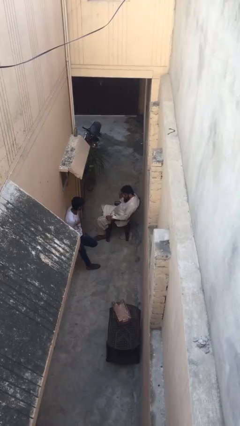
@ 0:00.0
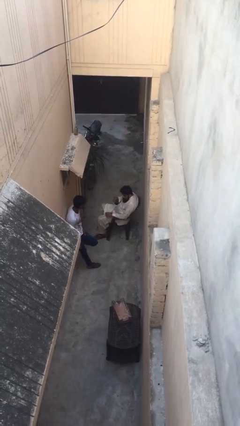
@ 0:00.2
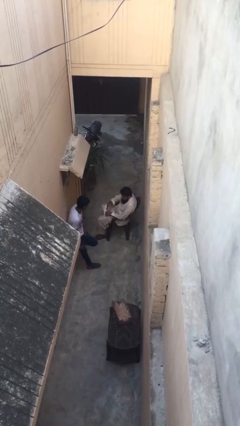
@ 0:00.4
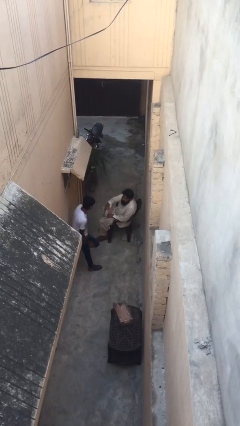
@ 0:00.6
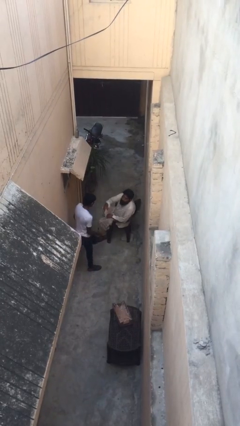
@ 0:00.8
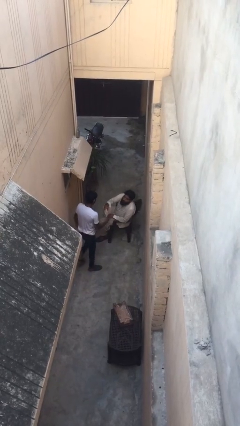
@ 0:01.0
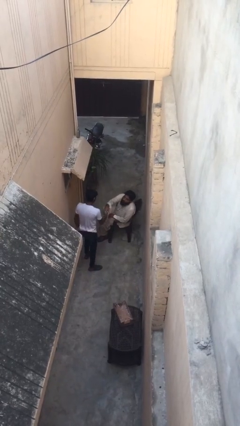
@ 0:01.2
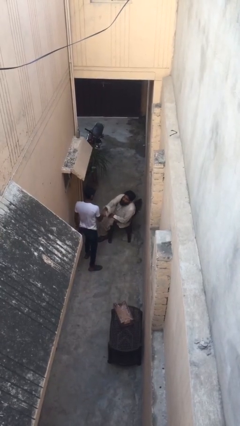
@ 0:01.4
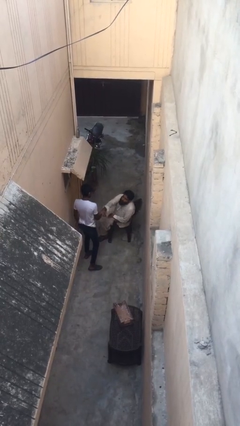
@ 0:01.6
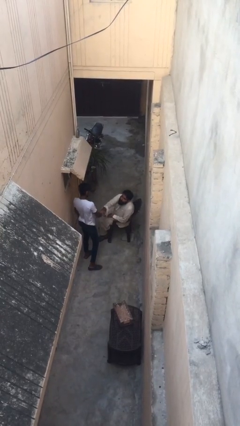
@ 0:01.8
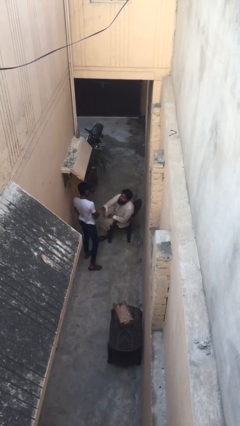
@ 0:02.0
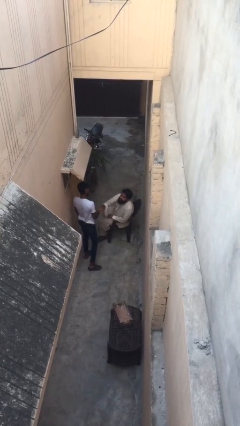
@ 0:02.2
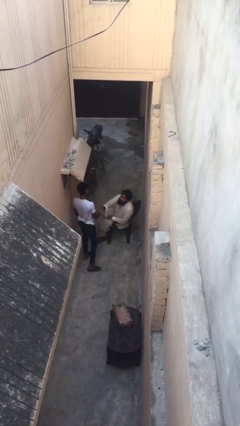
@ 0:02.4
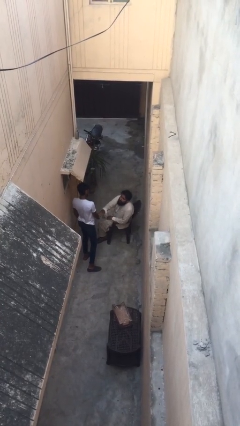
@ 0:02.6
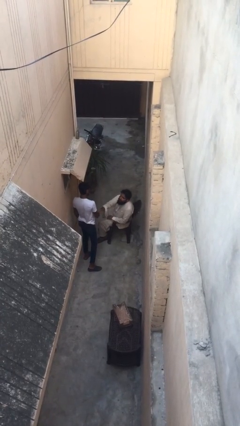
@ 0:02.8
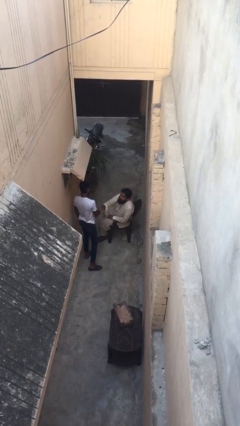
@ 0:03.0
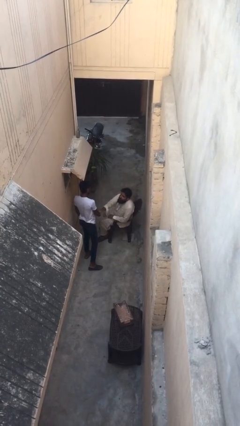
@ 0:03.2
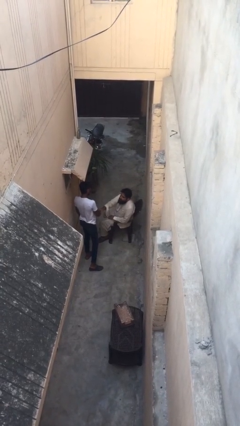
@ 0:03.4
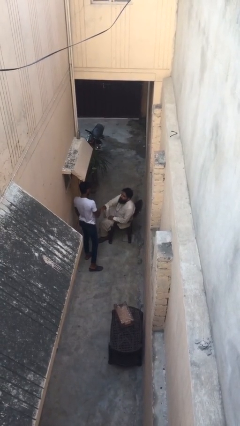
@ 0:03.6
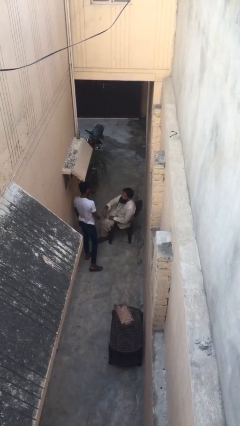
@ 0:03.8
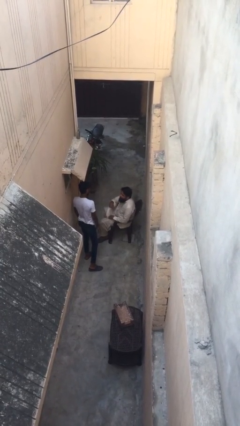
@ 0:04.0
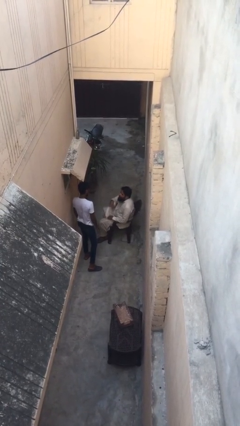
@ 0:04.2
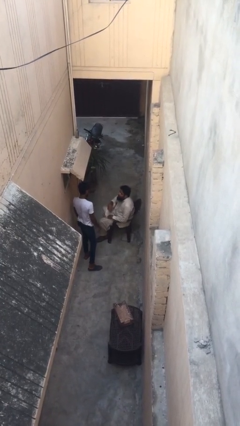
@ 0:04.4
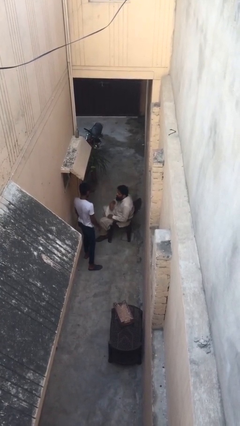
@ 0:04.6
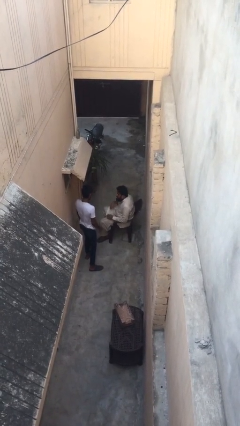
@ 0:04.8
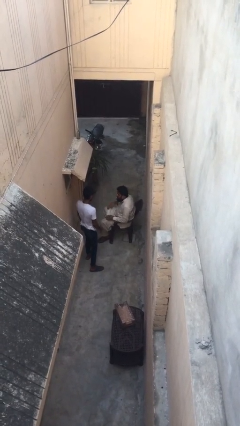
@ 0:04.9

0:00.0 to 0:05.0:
person shakes hand

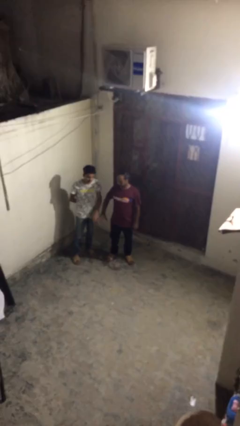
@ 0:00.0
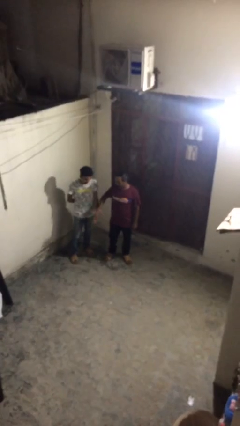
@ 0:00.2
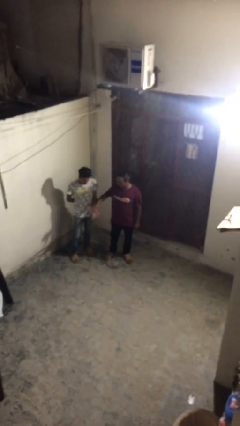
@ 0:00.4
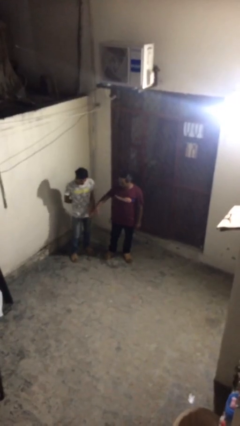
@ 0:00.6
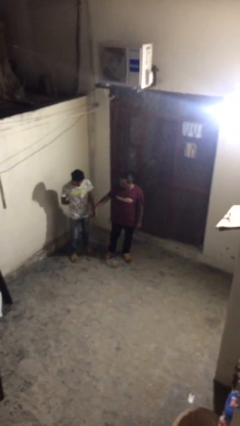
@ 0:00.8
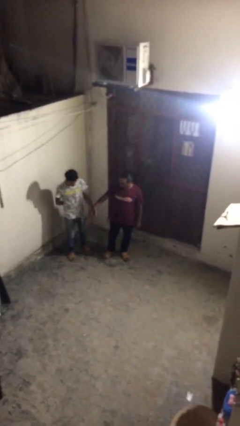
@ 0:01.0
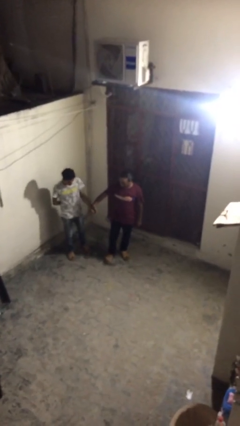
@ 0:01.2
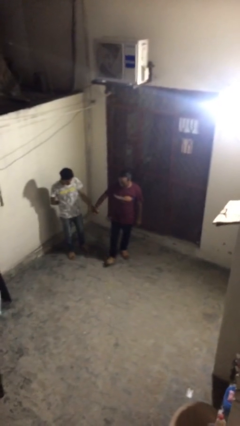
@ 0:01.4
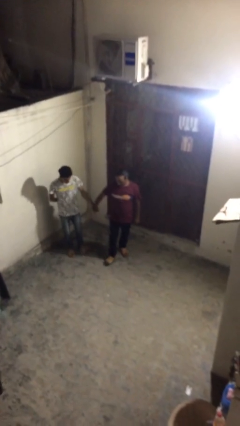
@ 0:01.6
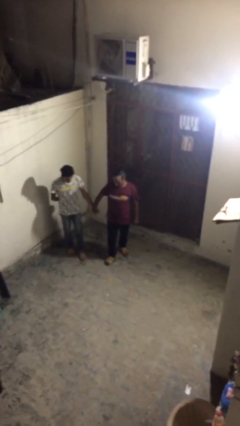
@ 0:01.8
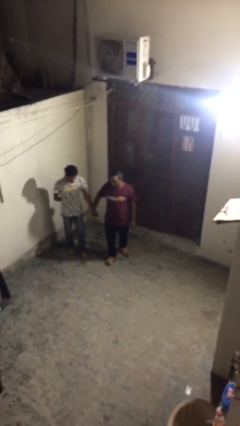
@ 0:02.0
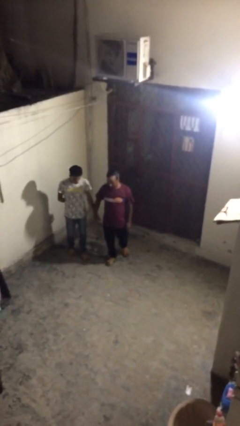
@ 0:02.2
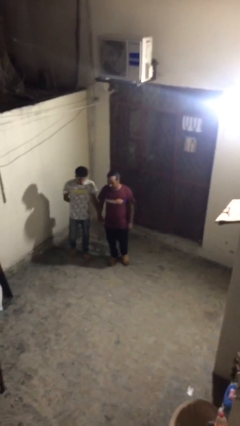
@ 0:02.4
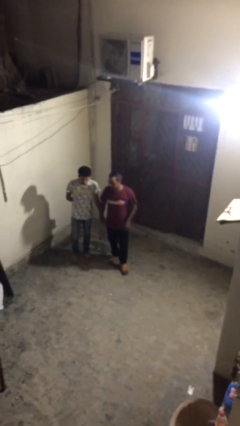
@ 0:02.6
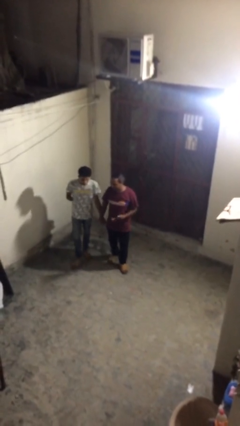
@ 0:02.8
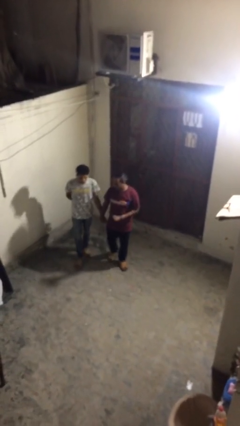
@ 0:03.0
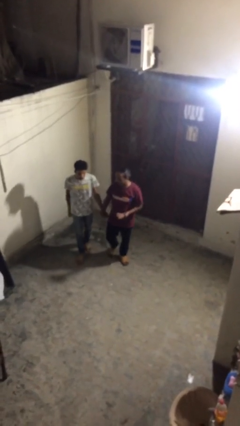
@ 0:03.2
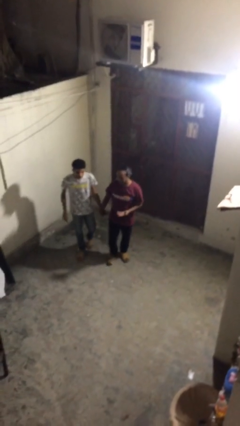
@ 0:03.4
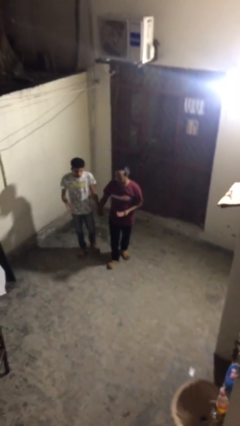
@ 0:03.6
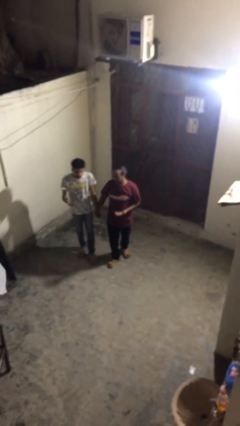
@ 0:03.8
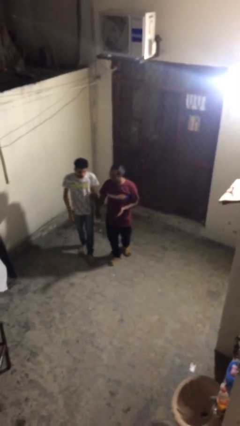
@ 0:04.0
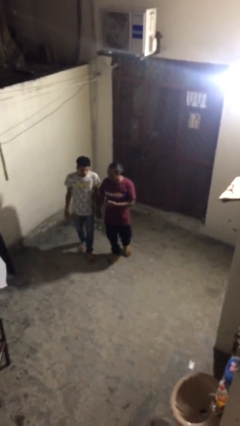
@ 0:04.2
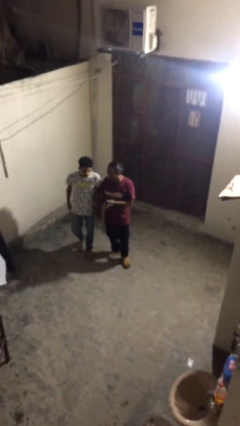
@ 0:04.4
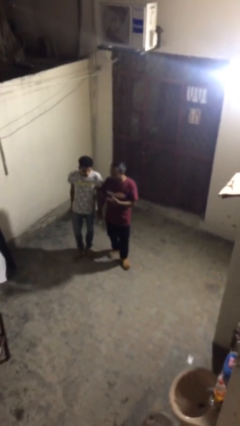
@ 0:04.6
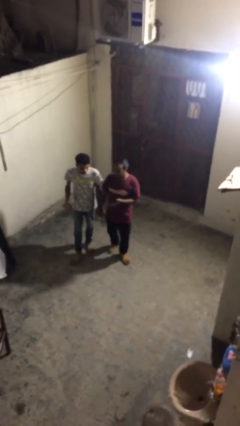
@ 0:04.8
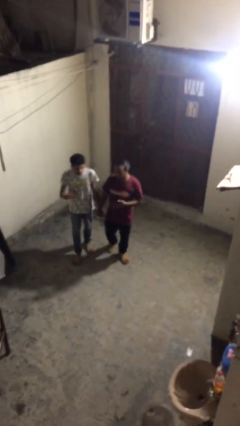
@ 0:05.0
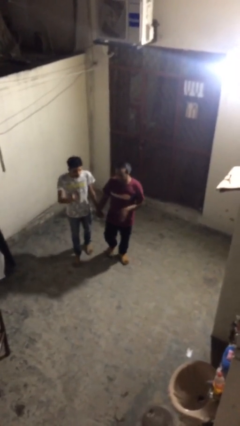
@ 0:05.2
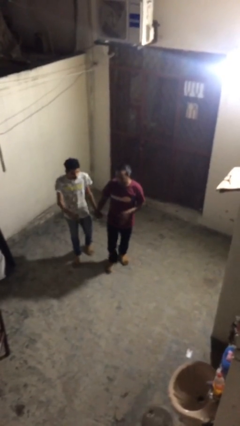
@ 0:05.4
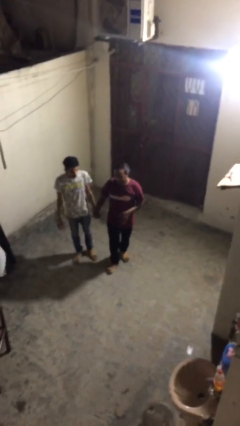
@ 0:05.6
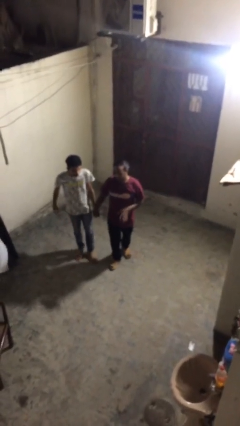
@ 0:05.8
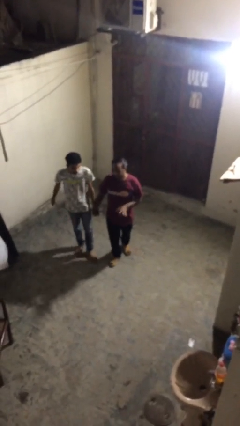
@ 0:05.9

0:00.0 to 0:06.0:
person holds hand

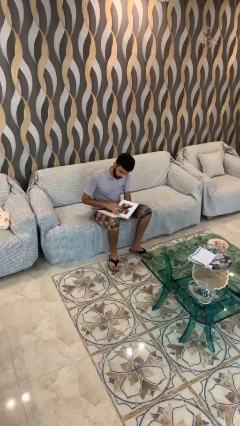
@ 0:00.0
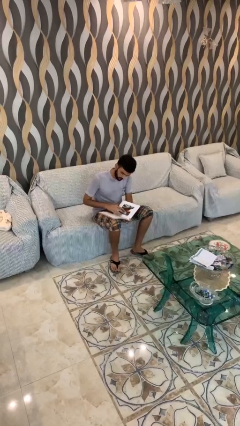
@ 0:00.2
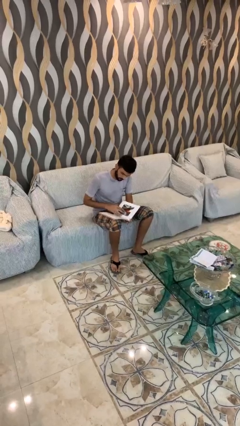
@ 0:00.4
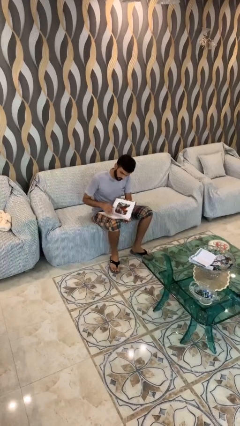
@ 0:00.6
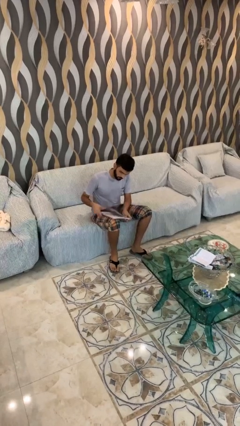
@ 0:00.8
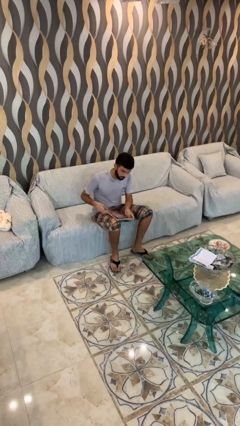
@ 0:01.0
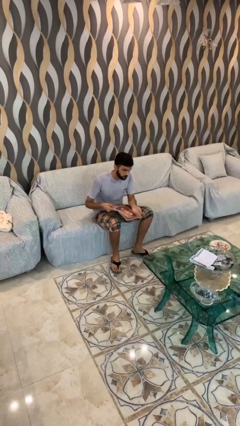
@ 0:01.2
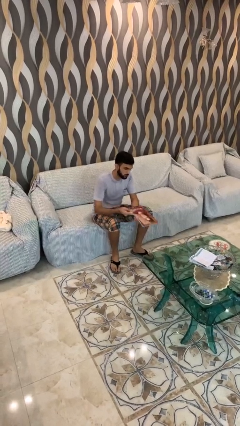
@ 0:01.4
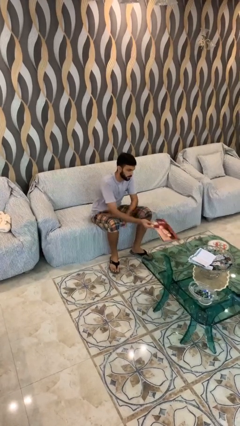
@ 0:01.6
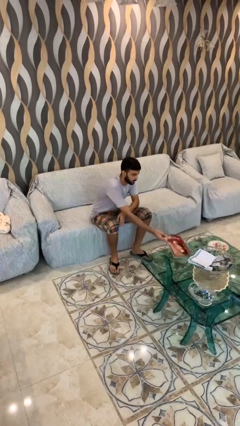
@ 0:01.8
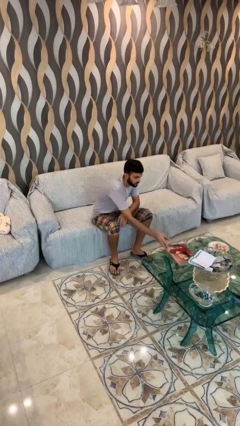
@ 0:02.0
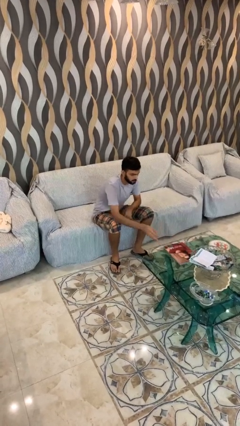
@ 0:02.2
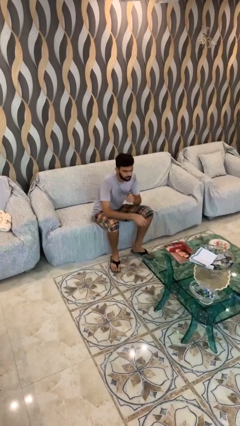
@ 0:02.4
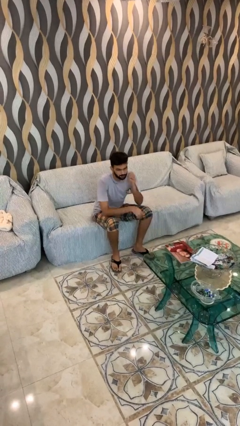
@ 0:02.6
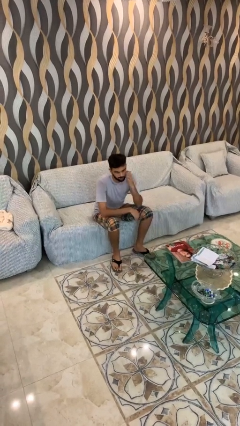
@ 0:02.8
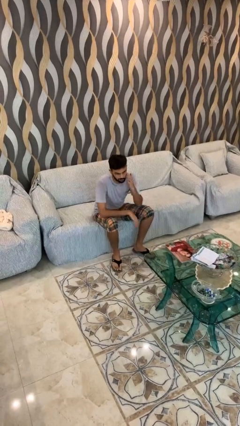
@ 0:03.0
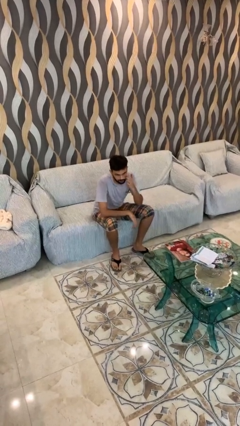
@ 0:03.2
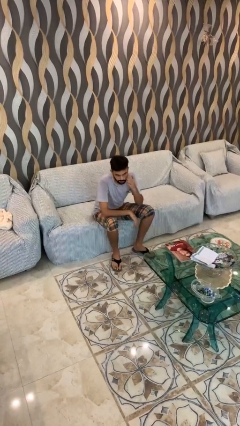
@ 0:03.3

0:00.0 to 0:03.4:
person puts down object on table

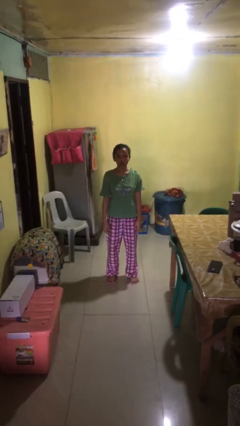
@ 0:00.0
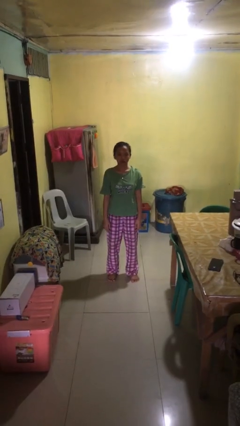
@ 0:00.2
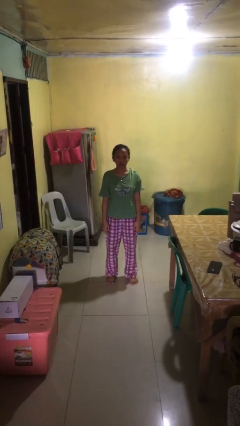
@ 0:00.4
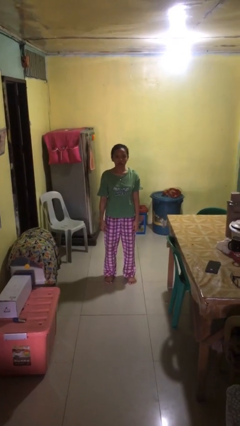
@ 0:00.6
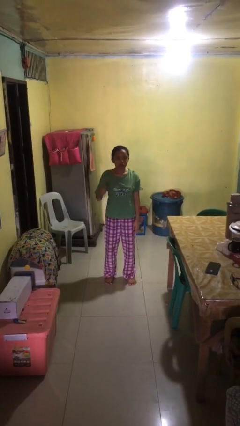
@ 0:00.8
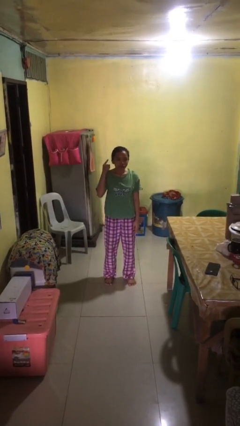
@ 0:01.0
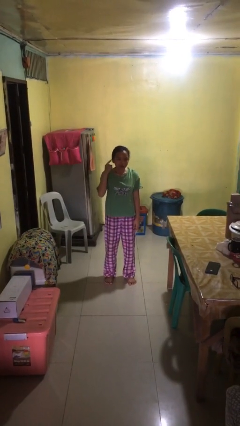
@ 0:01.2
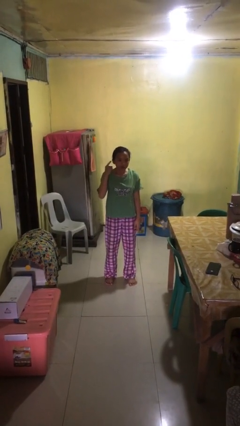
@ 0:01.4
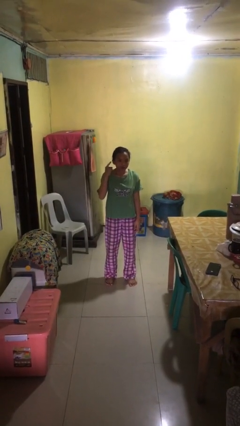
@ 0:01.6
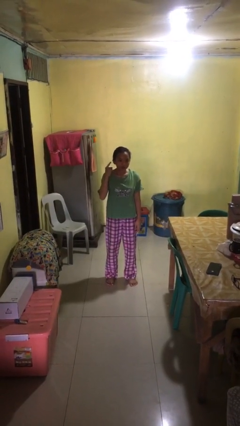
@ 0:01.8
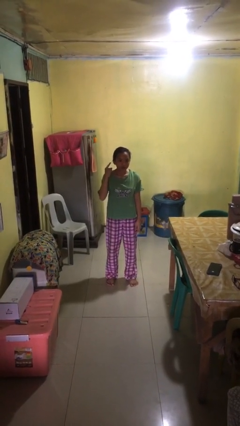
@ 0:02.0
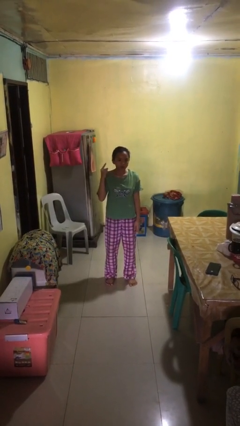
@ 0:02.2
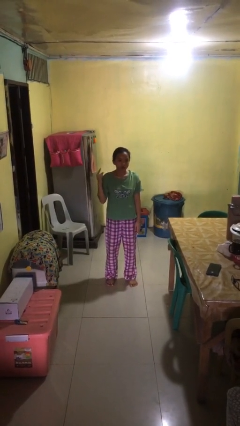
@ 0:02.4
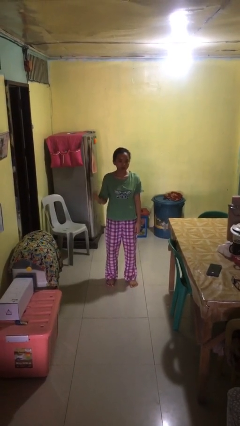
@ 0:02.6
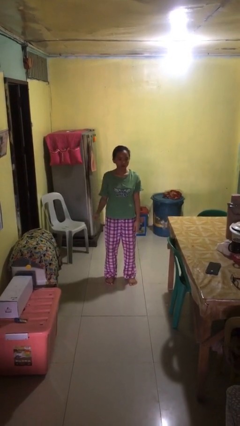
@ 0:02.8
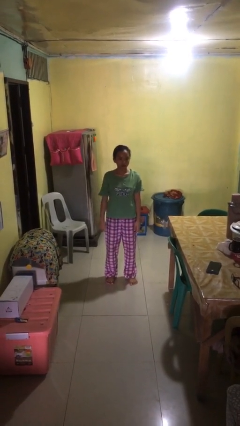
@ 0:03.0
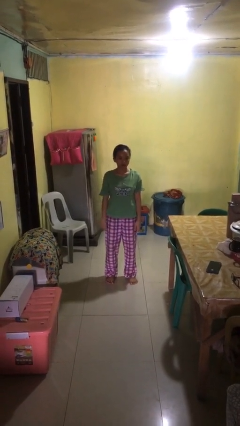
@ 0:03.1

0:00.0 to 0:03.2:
person gestures listen closely
